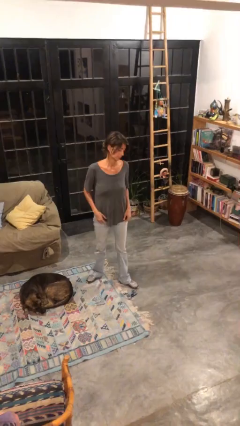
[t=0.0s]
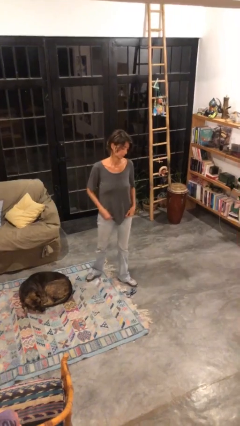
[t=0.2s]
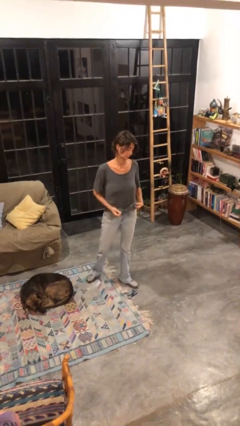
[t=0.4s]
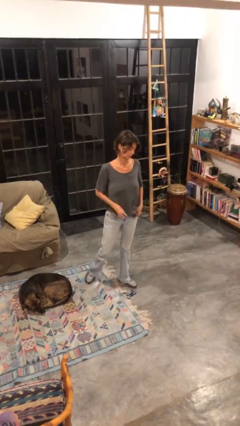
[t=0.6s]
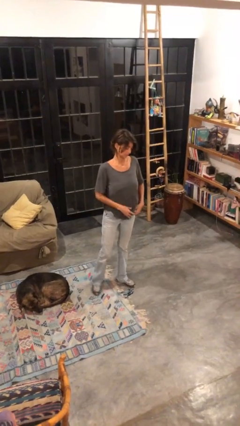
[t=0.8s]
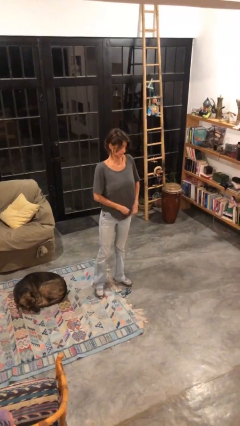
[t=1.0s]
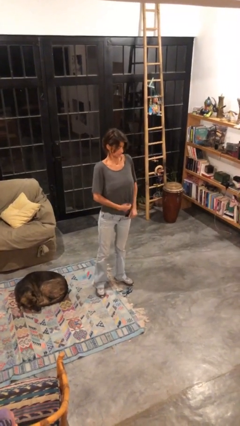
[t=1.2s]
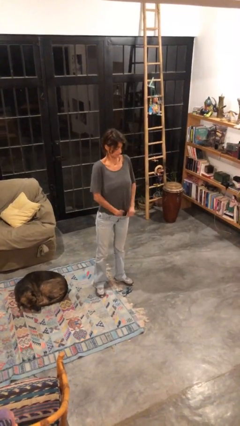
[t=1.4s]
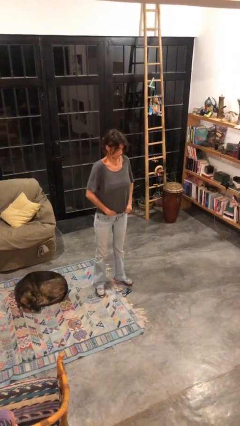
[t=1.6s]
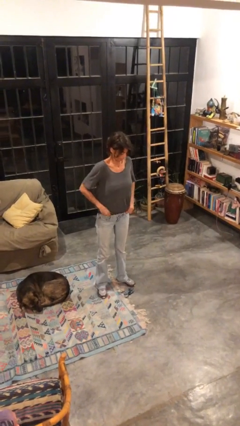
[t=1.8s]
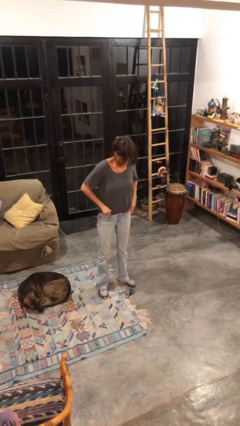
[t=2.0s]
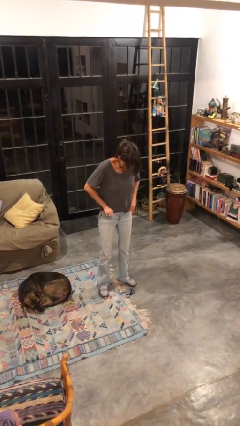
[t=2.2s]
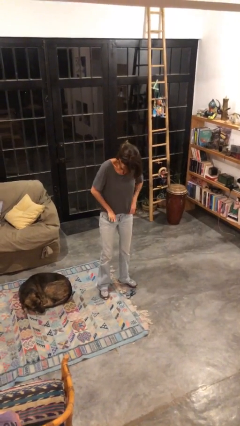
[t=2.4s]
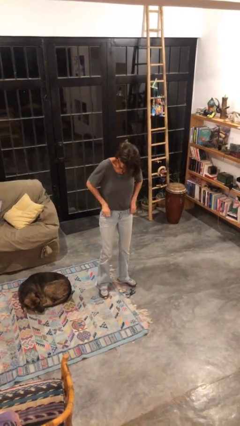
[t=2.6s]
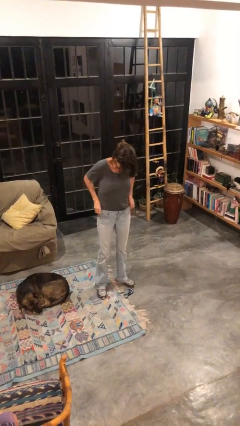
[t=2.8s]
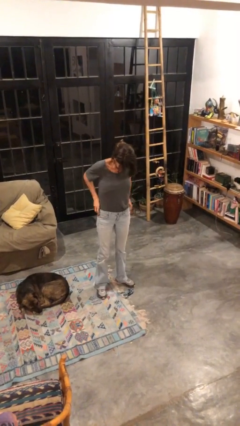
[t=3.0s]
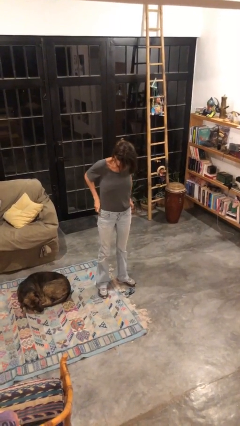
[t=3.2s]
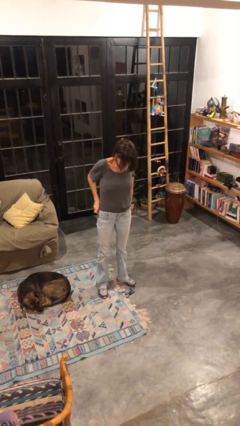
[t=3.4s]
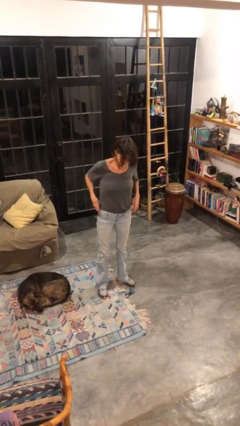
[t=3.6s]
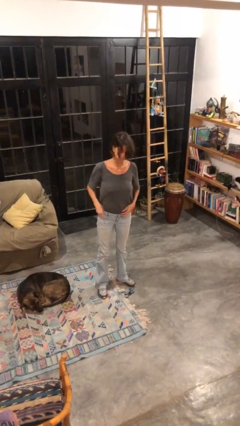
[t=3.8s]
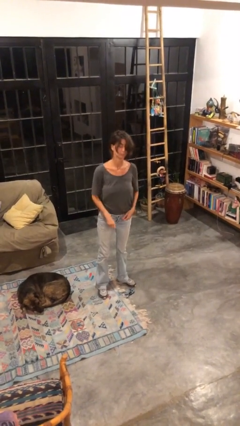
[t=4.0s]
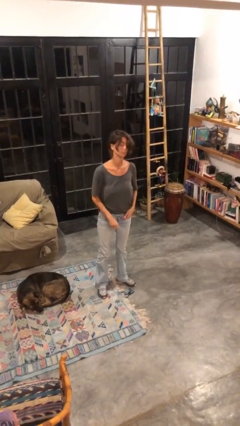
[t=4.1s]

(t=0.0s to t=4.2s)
person tucks in shirt

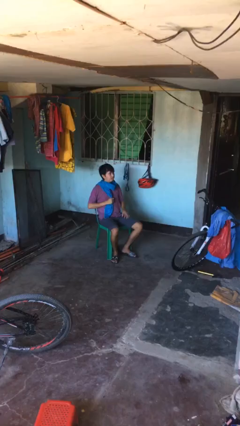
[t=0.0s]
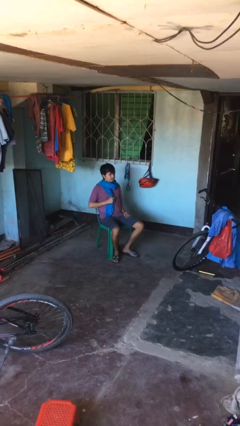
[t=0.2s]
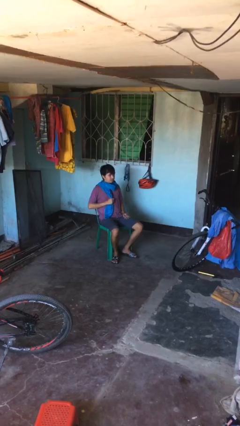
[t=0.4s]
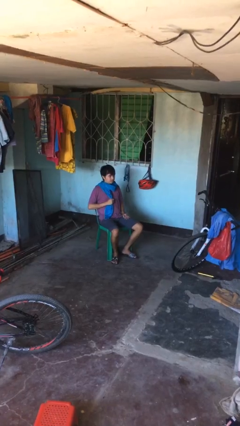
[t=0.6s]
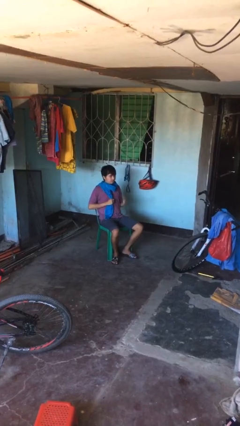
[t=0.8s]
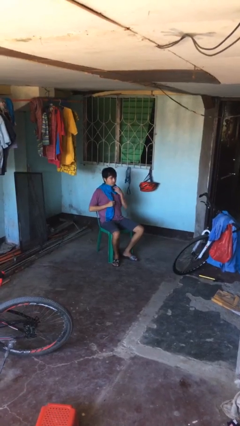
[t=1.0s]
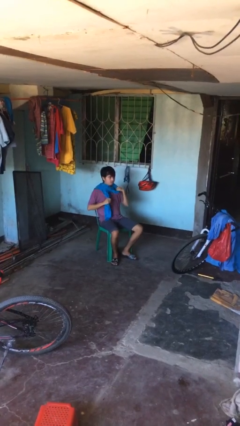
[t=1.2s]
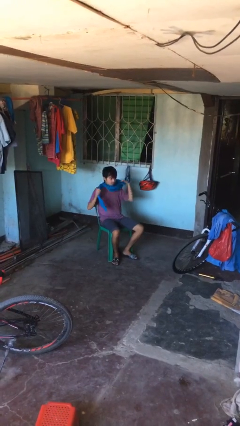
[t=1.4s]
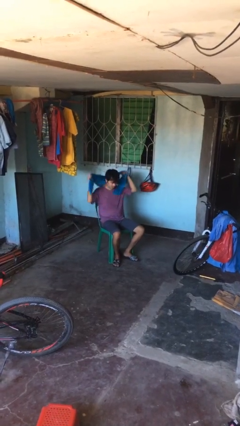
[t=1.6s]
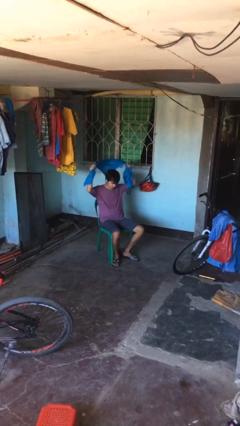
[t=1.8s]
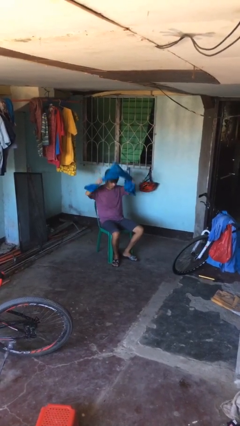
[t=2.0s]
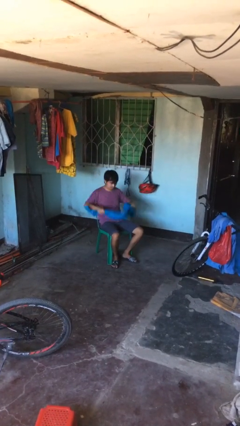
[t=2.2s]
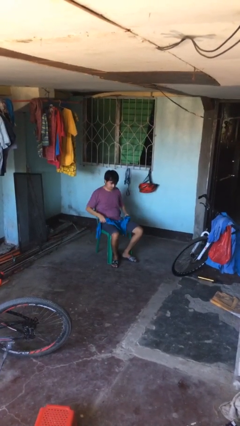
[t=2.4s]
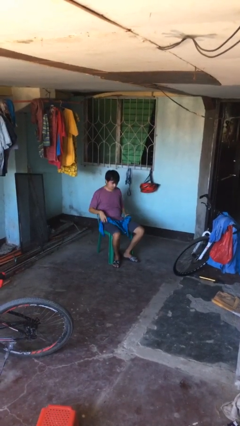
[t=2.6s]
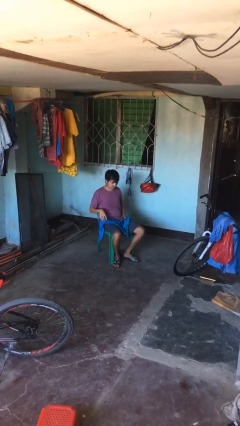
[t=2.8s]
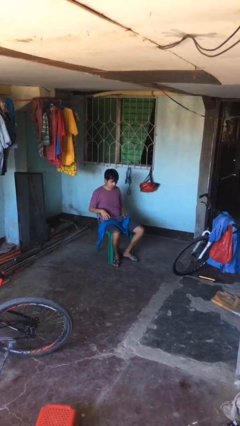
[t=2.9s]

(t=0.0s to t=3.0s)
person takes off scarf

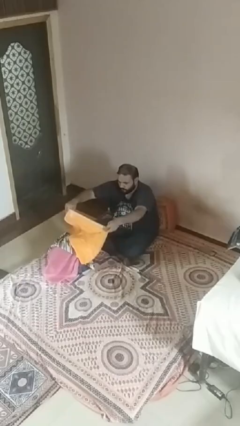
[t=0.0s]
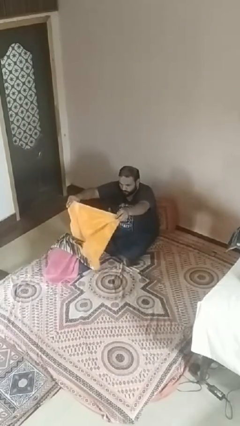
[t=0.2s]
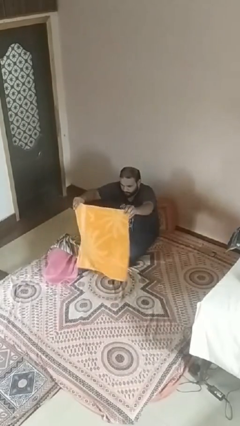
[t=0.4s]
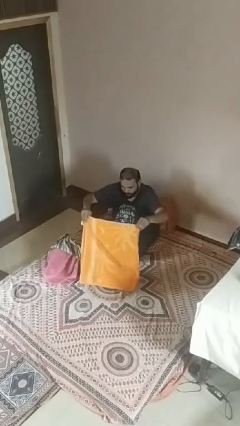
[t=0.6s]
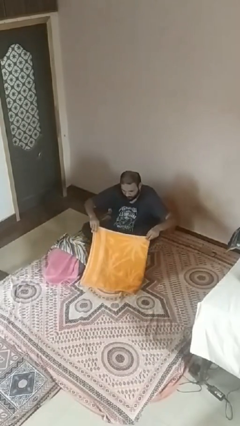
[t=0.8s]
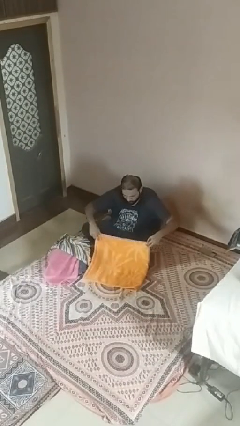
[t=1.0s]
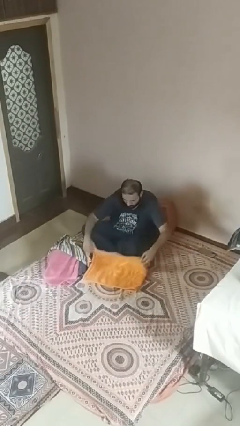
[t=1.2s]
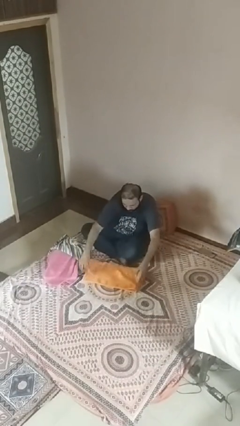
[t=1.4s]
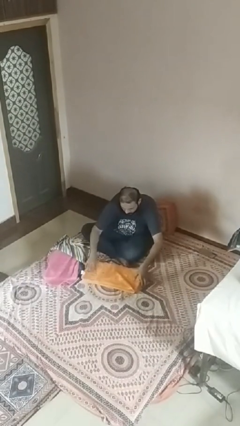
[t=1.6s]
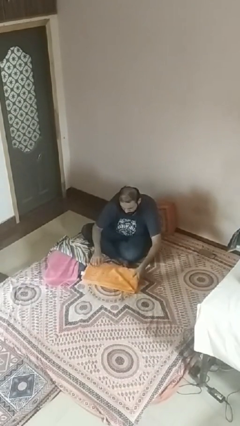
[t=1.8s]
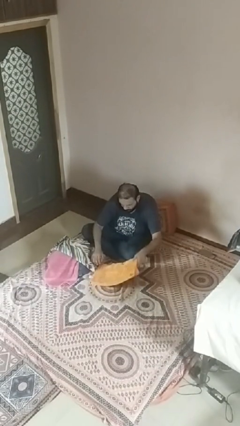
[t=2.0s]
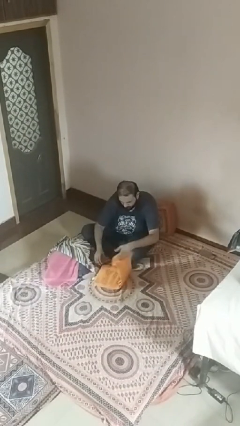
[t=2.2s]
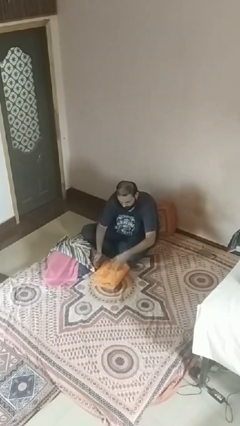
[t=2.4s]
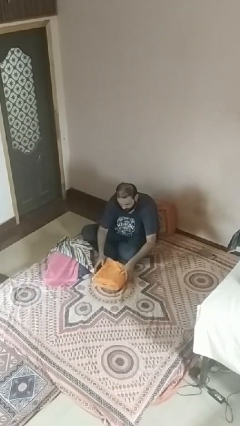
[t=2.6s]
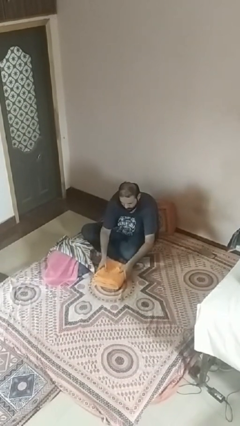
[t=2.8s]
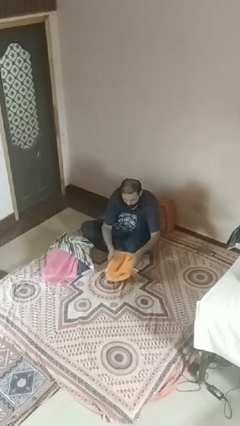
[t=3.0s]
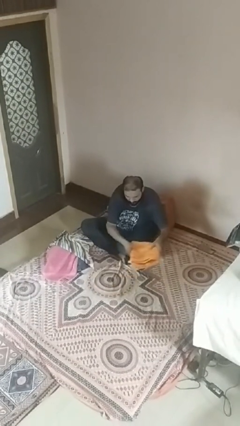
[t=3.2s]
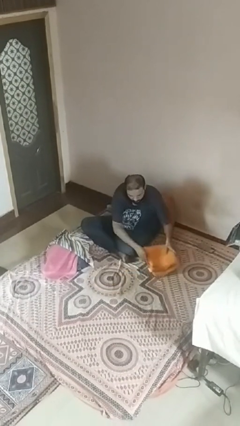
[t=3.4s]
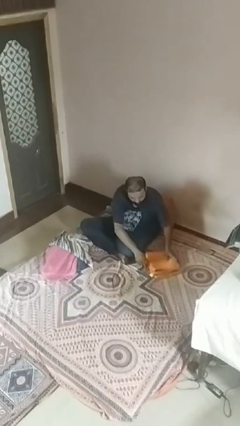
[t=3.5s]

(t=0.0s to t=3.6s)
person folds towel

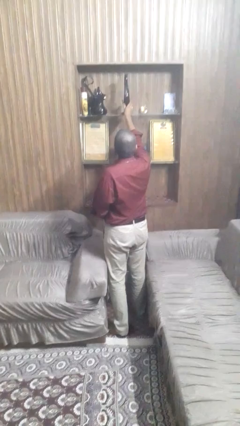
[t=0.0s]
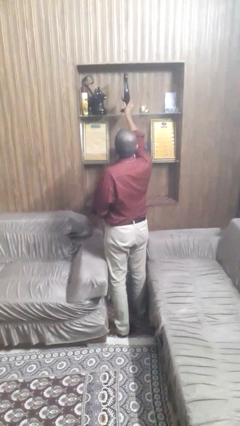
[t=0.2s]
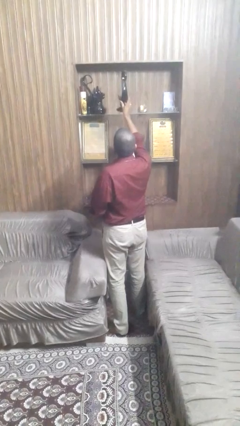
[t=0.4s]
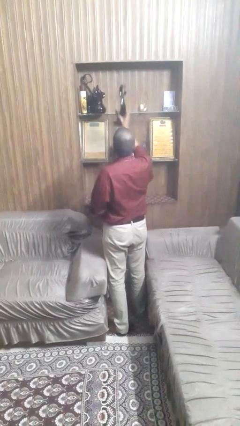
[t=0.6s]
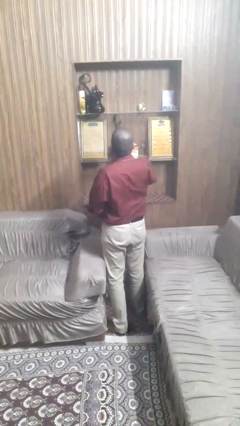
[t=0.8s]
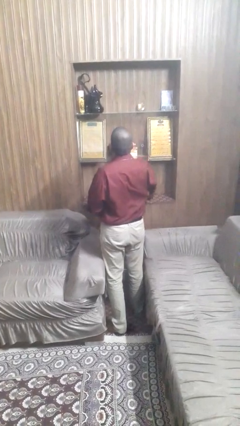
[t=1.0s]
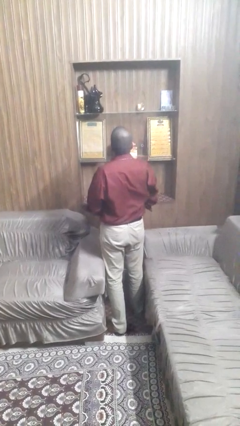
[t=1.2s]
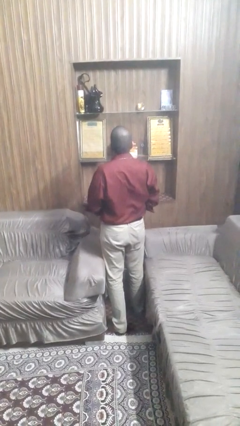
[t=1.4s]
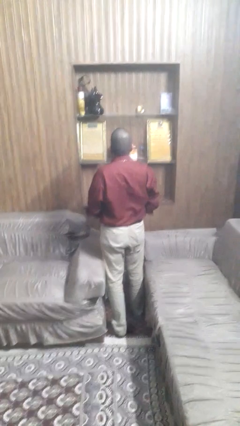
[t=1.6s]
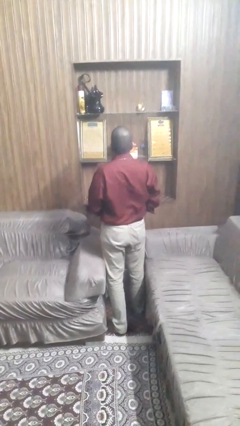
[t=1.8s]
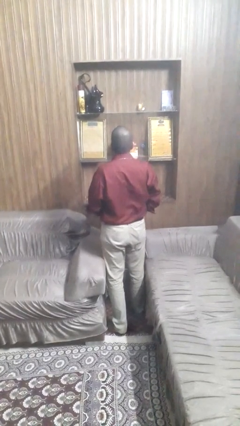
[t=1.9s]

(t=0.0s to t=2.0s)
person picks up object from shelf

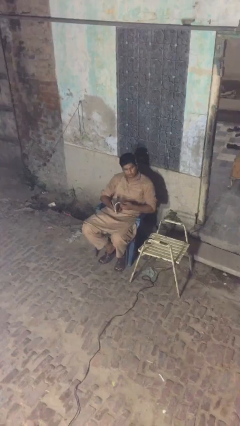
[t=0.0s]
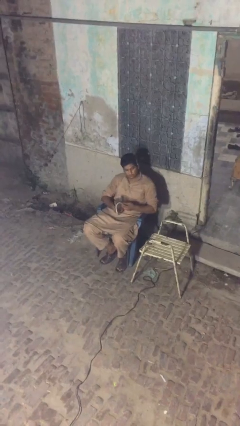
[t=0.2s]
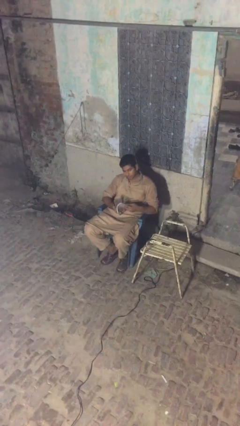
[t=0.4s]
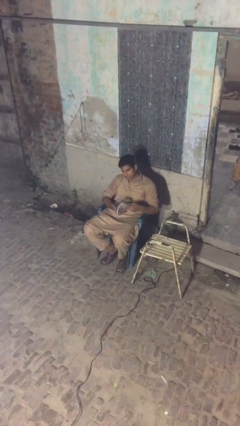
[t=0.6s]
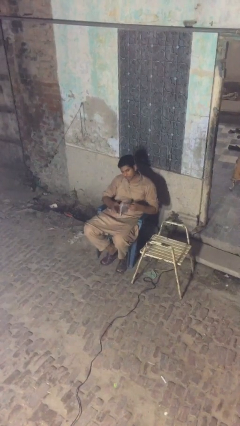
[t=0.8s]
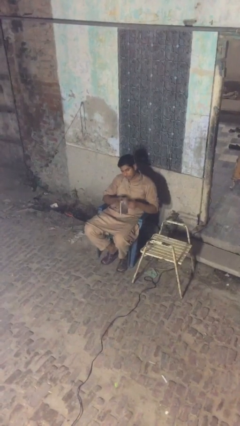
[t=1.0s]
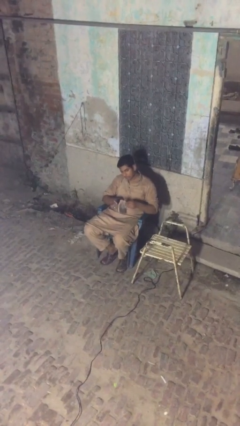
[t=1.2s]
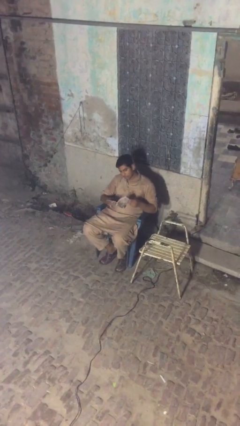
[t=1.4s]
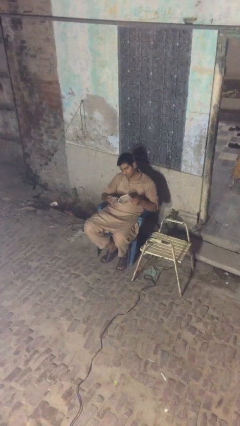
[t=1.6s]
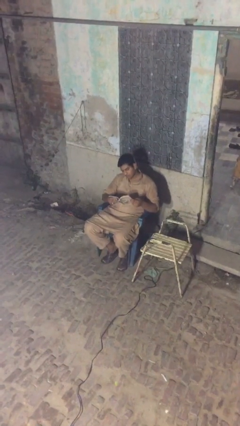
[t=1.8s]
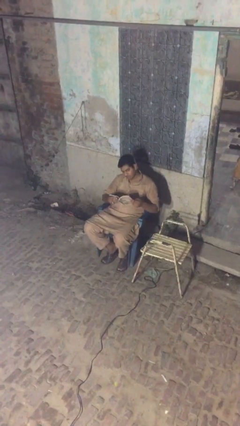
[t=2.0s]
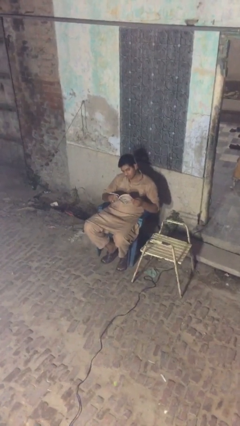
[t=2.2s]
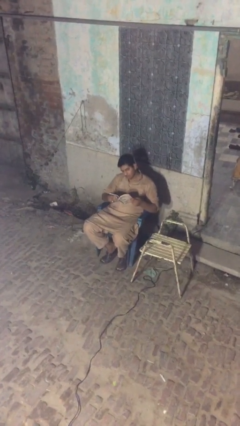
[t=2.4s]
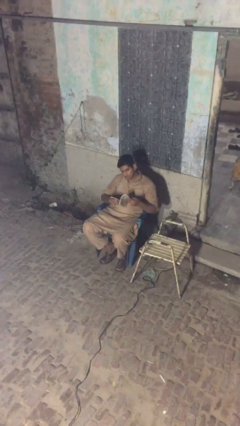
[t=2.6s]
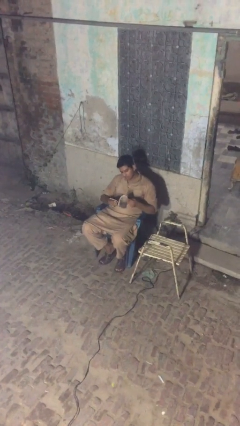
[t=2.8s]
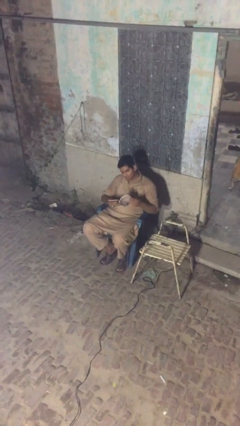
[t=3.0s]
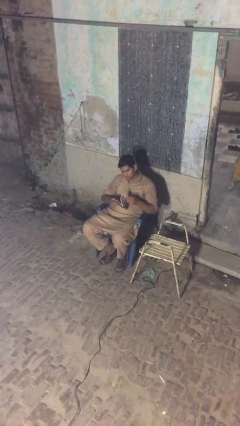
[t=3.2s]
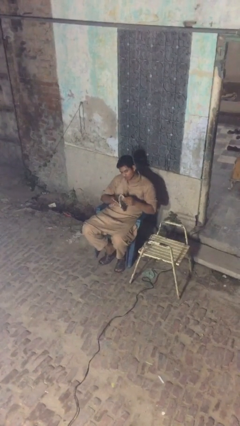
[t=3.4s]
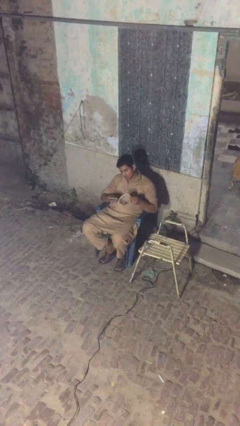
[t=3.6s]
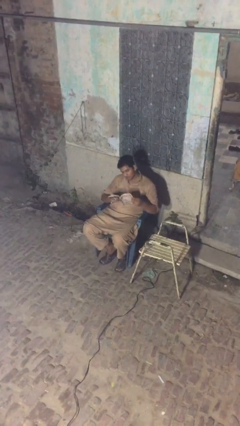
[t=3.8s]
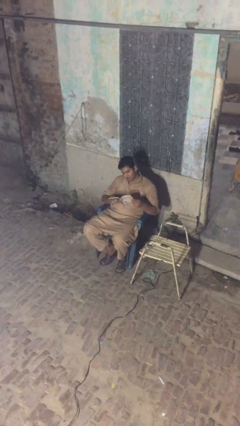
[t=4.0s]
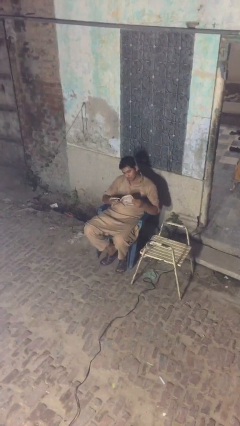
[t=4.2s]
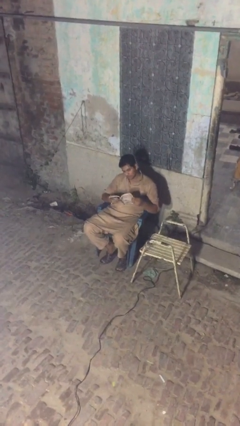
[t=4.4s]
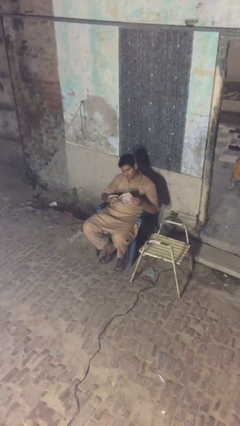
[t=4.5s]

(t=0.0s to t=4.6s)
person reads document
